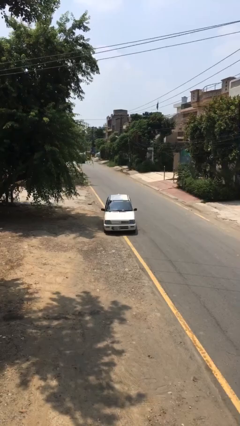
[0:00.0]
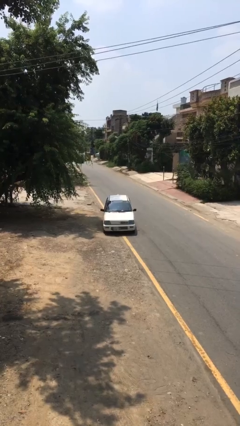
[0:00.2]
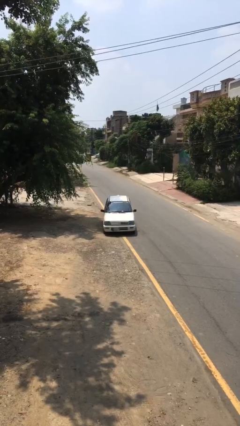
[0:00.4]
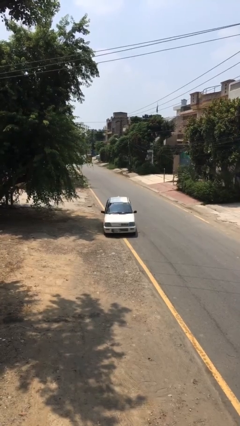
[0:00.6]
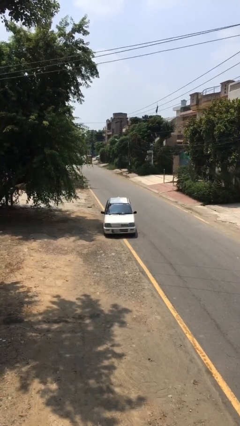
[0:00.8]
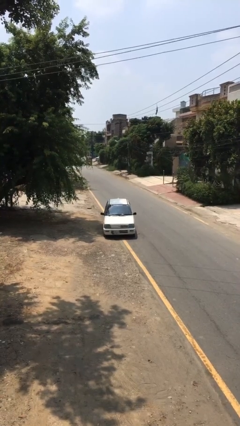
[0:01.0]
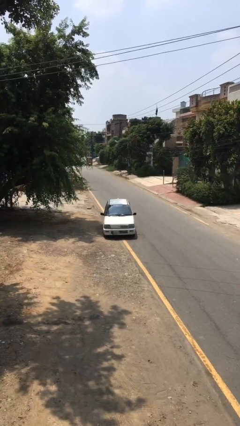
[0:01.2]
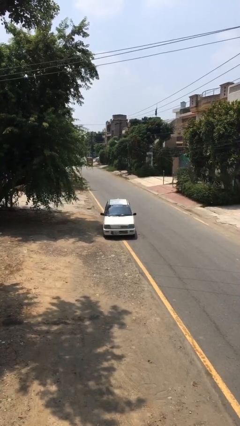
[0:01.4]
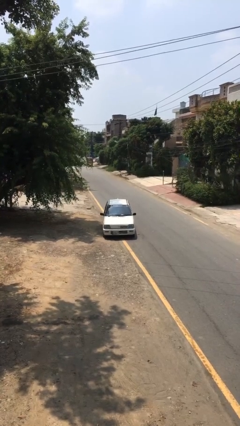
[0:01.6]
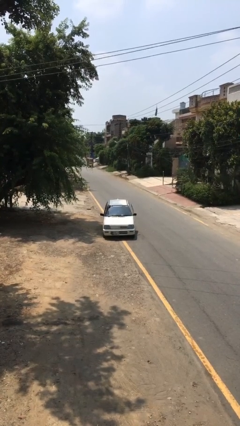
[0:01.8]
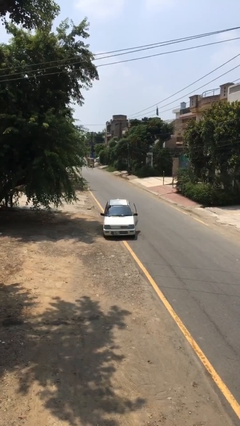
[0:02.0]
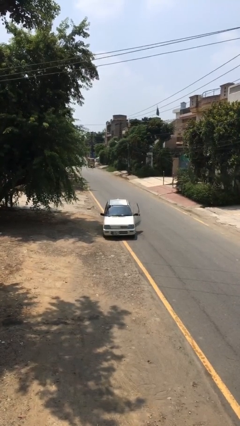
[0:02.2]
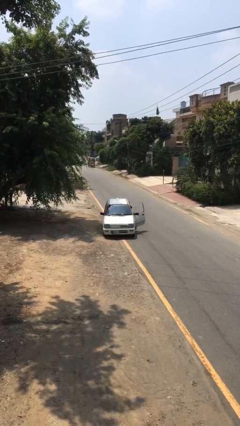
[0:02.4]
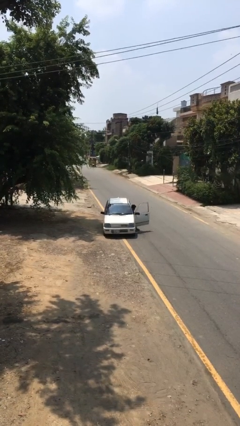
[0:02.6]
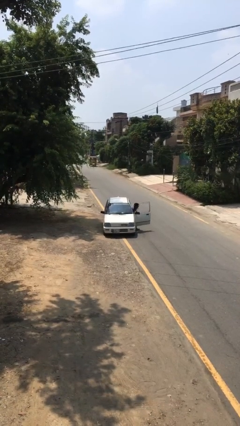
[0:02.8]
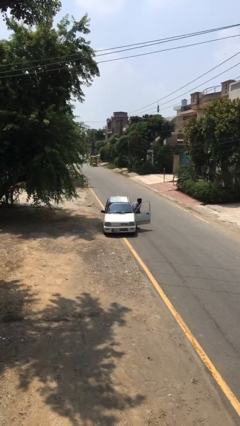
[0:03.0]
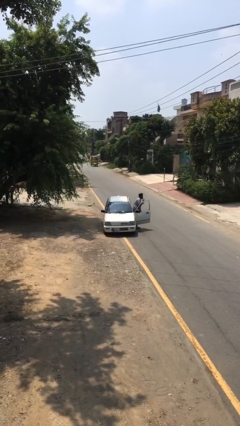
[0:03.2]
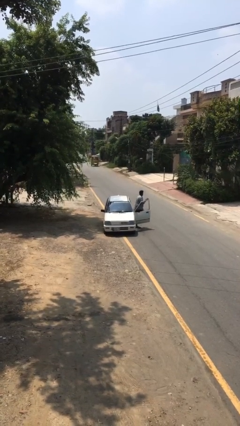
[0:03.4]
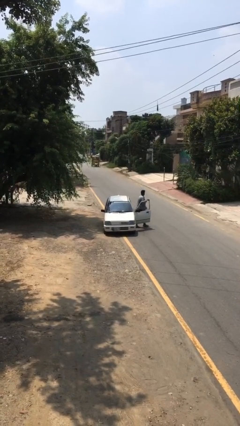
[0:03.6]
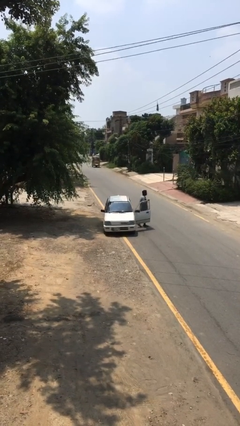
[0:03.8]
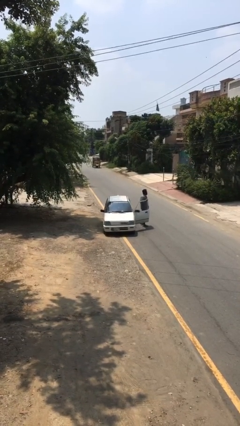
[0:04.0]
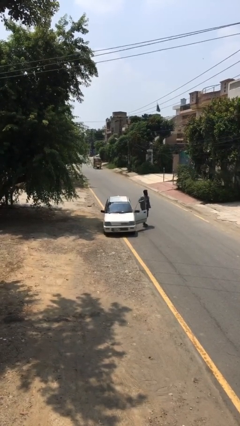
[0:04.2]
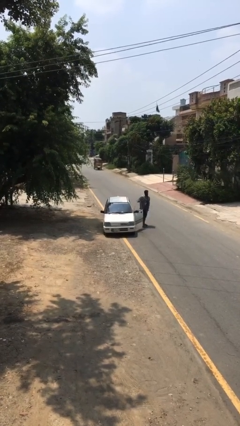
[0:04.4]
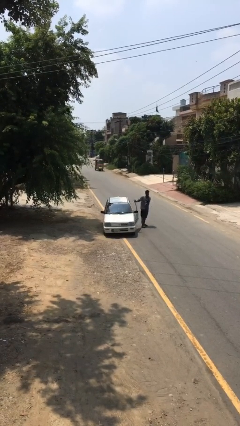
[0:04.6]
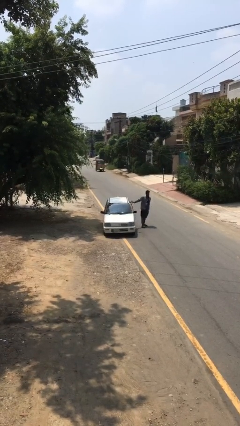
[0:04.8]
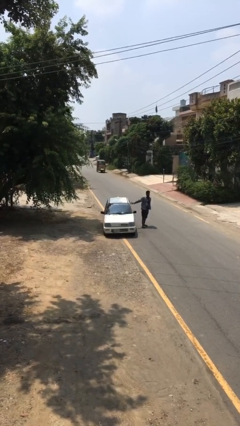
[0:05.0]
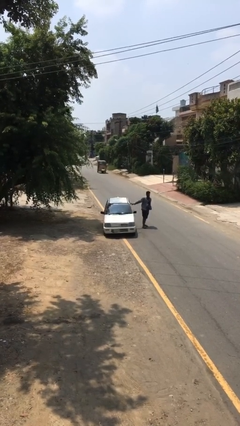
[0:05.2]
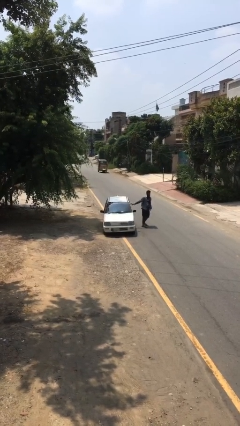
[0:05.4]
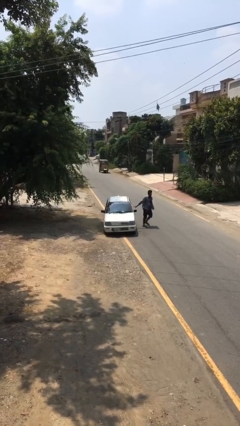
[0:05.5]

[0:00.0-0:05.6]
car drops off person

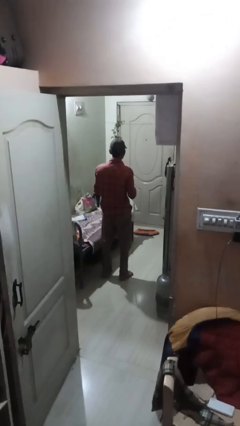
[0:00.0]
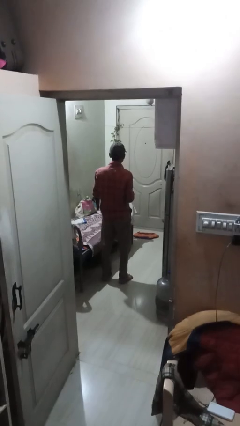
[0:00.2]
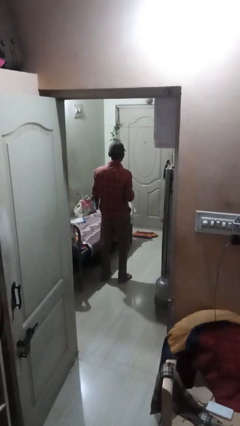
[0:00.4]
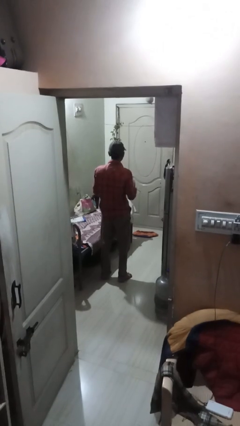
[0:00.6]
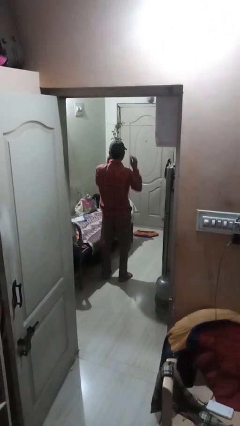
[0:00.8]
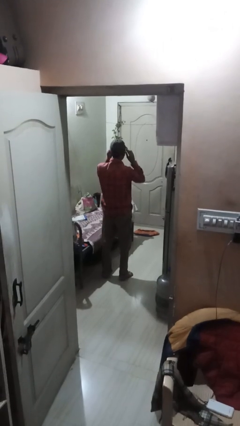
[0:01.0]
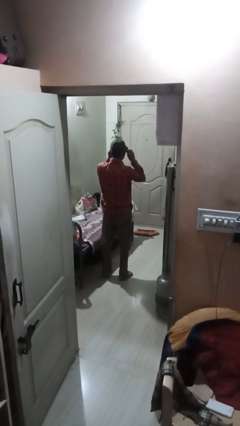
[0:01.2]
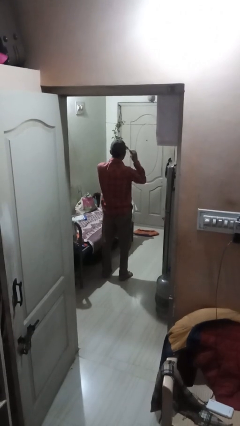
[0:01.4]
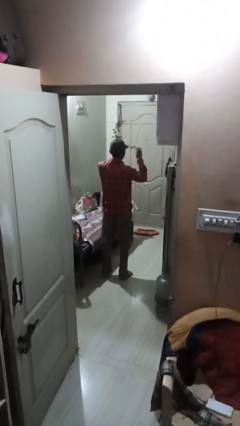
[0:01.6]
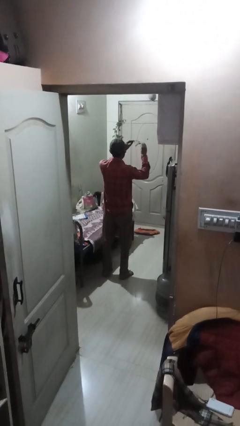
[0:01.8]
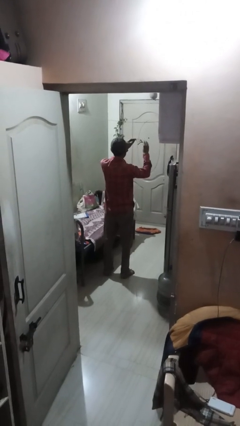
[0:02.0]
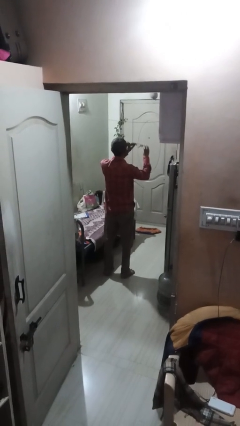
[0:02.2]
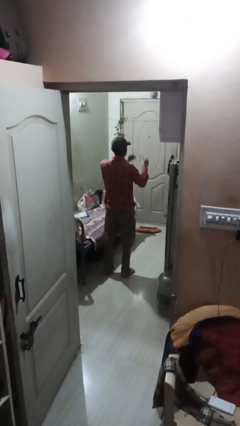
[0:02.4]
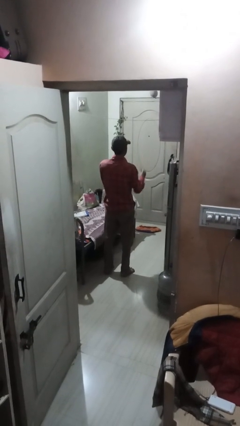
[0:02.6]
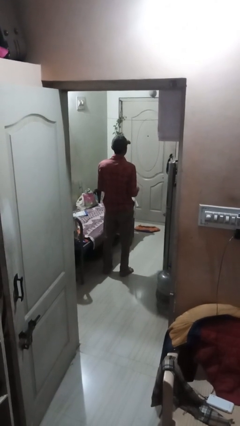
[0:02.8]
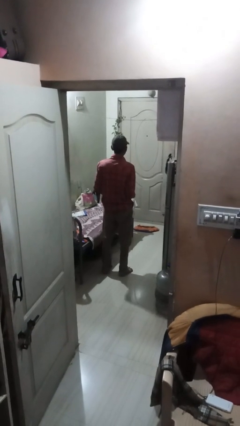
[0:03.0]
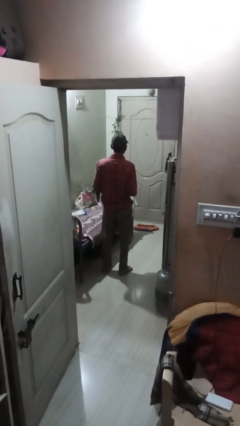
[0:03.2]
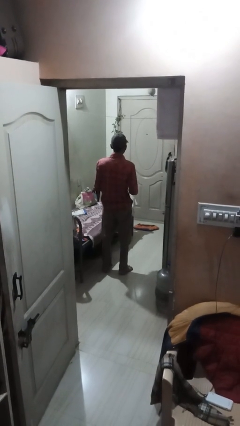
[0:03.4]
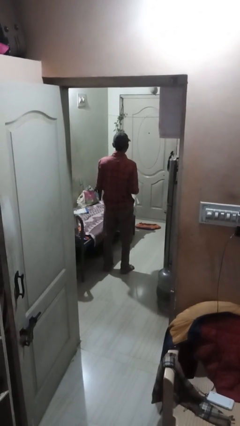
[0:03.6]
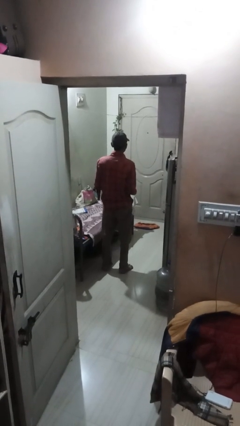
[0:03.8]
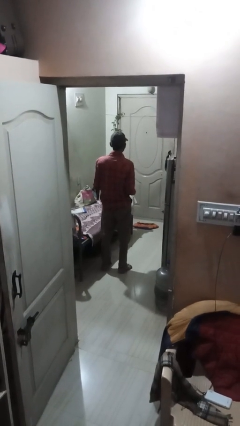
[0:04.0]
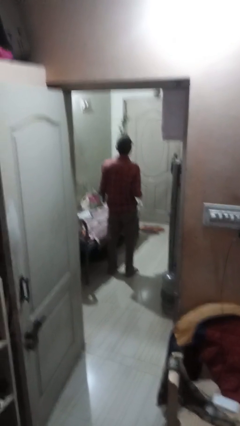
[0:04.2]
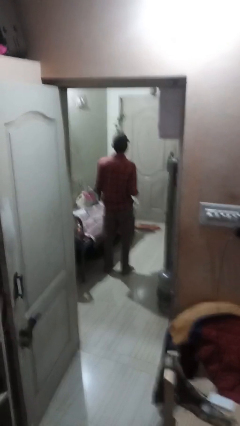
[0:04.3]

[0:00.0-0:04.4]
person takes off glasses

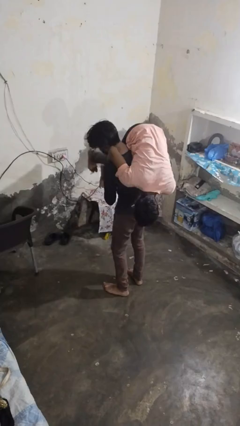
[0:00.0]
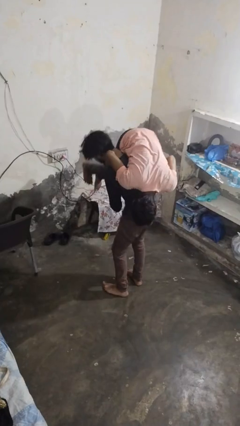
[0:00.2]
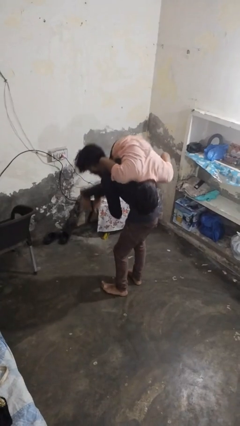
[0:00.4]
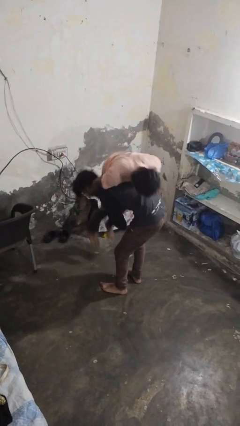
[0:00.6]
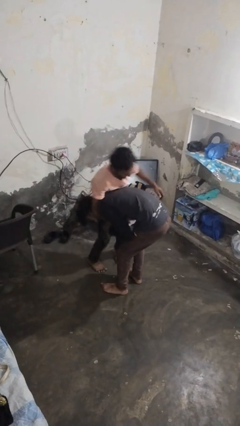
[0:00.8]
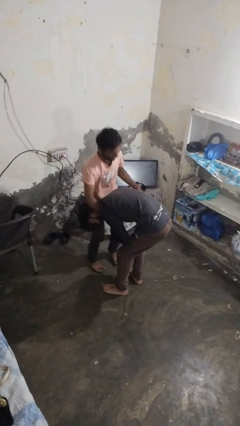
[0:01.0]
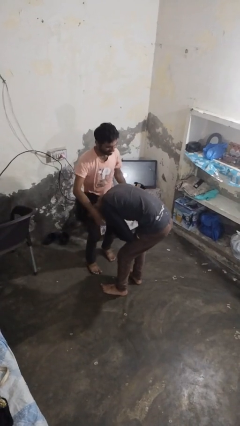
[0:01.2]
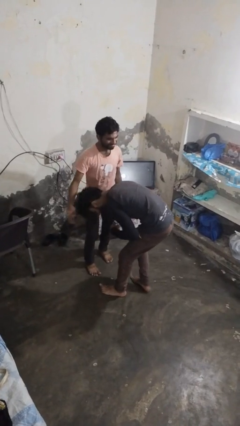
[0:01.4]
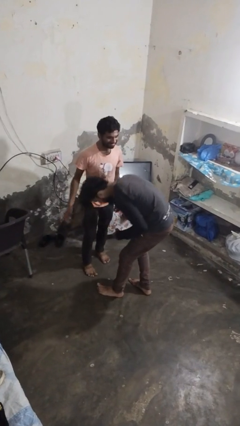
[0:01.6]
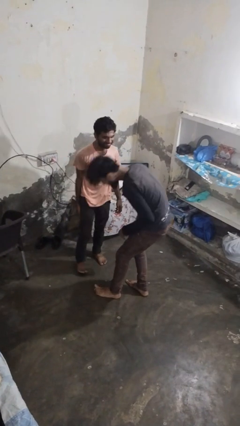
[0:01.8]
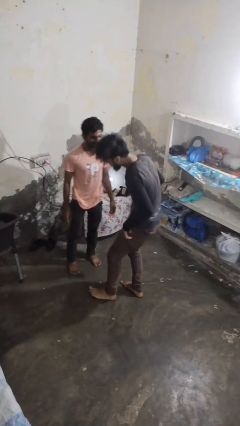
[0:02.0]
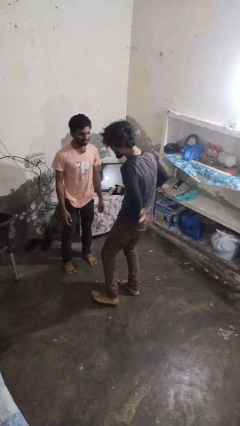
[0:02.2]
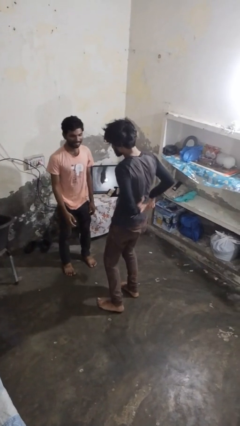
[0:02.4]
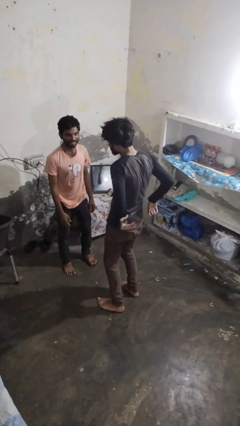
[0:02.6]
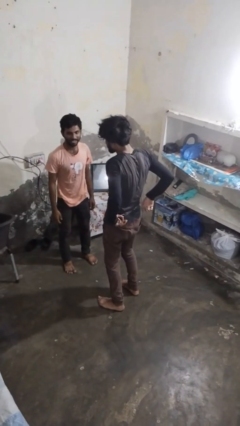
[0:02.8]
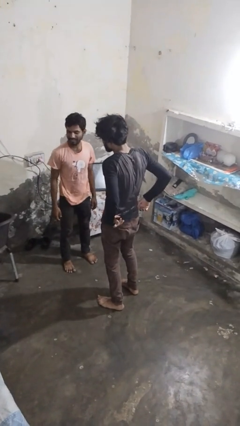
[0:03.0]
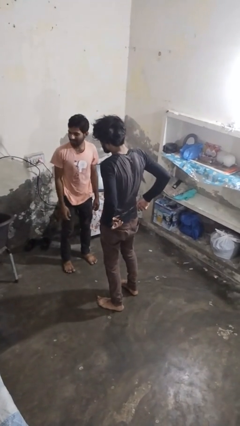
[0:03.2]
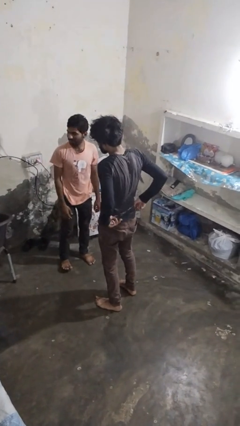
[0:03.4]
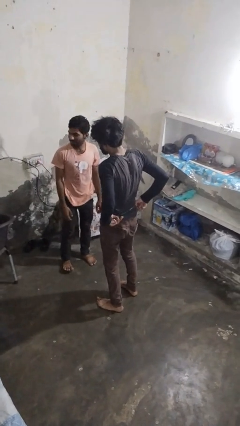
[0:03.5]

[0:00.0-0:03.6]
person puts down person

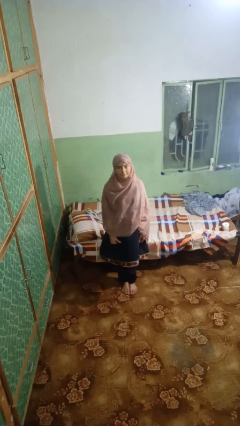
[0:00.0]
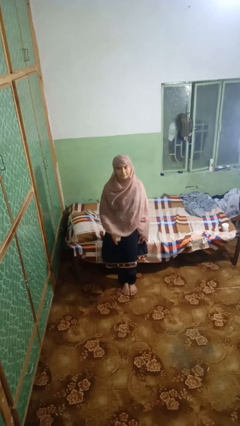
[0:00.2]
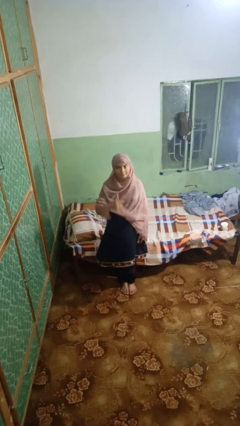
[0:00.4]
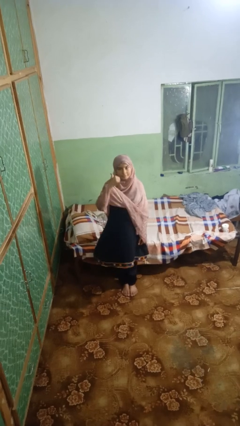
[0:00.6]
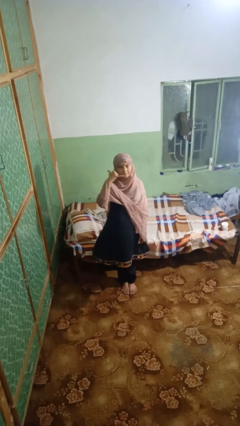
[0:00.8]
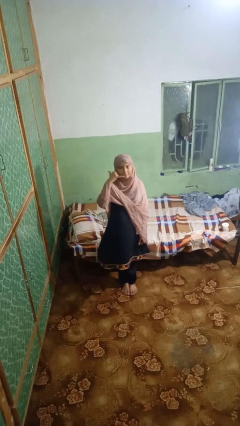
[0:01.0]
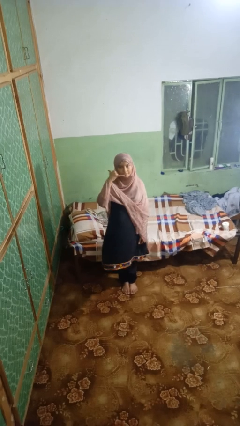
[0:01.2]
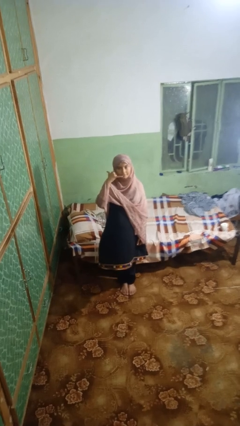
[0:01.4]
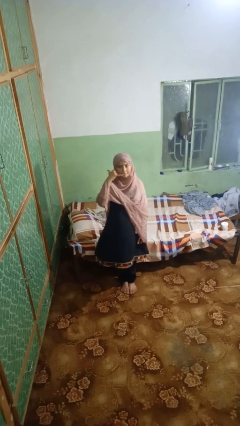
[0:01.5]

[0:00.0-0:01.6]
person gestures call me

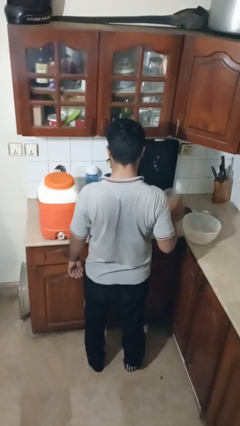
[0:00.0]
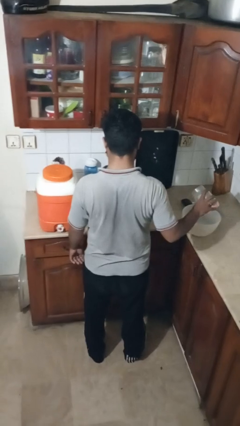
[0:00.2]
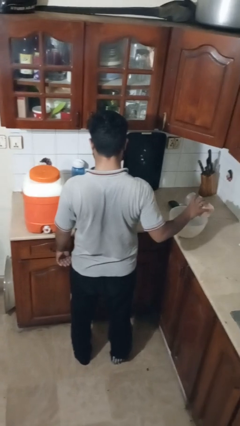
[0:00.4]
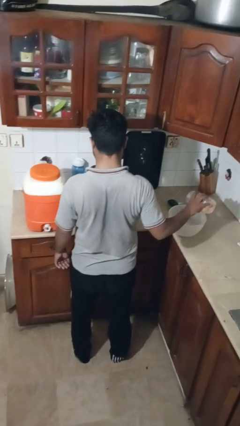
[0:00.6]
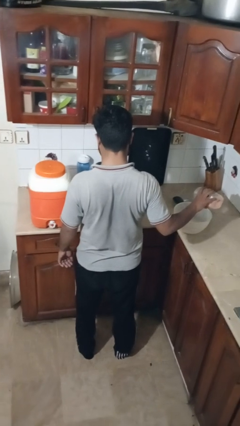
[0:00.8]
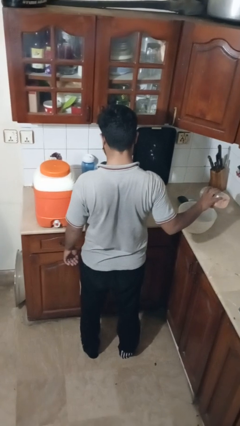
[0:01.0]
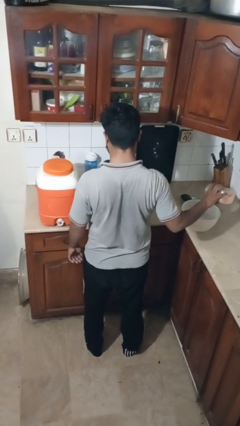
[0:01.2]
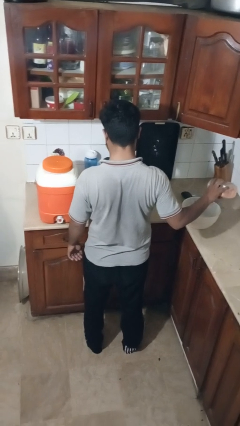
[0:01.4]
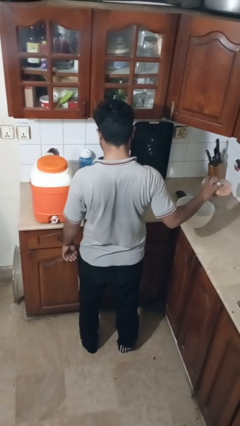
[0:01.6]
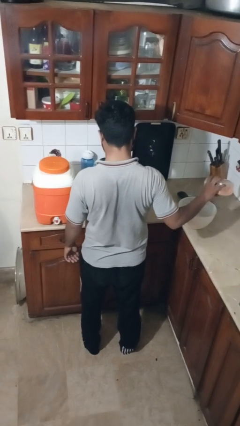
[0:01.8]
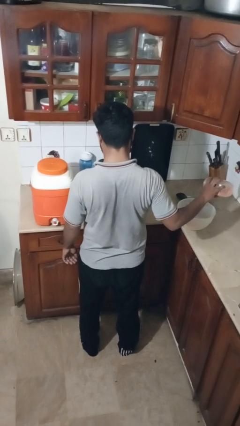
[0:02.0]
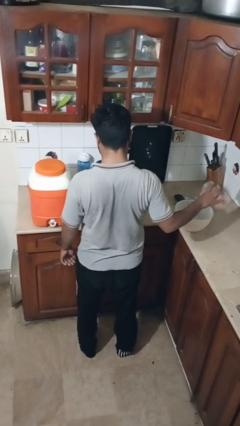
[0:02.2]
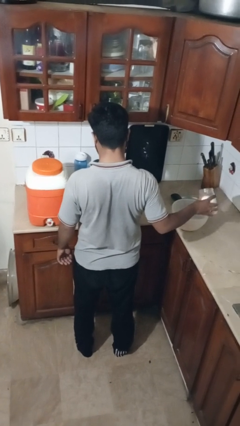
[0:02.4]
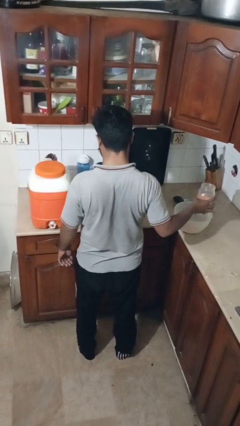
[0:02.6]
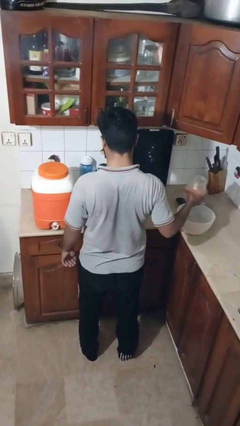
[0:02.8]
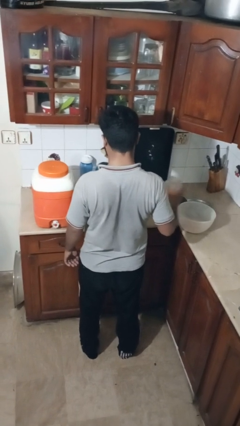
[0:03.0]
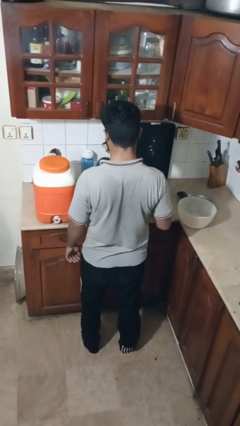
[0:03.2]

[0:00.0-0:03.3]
person pours into bowl
